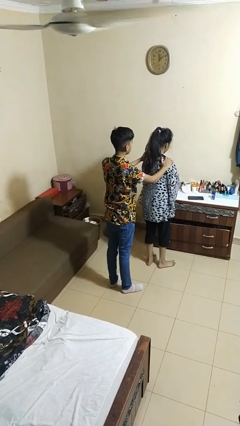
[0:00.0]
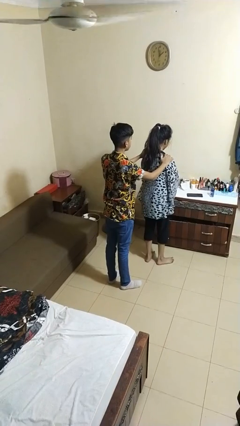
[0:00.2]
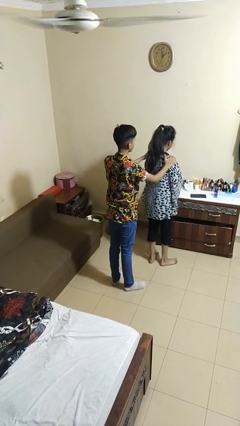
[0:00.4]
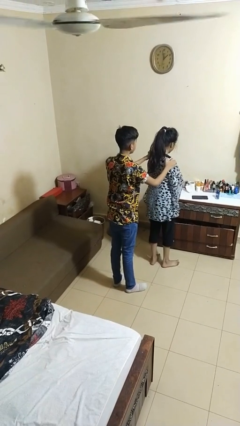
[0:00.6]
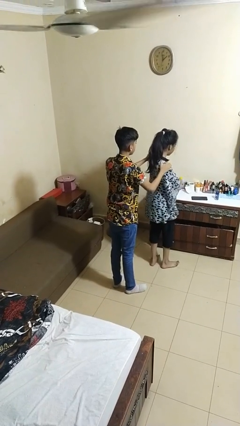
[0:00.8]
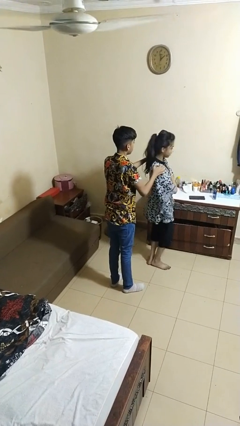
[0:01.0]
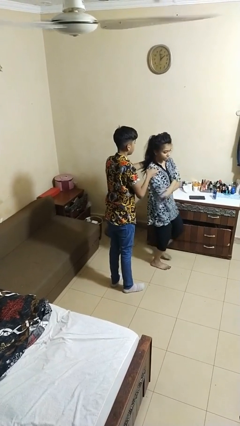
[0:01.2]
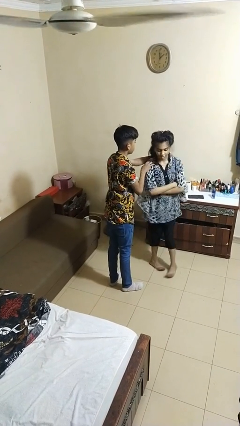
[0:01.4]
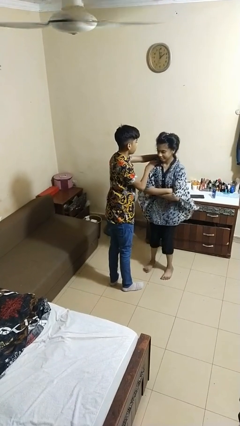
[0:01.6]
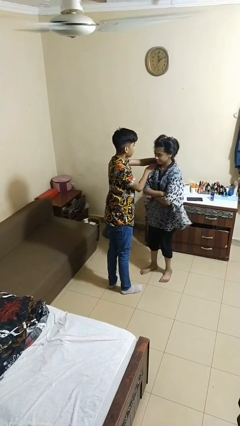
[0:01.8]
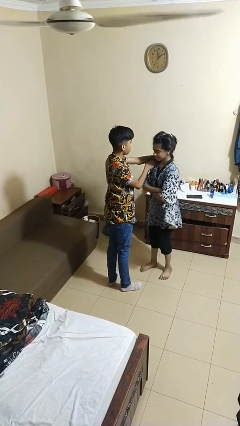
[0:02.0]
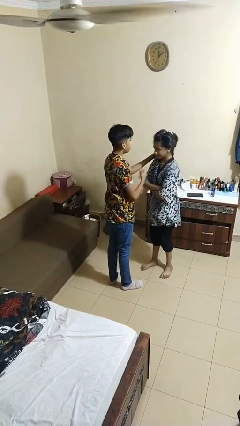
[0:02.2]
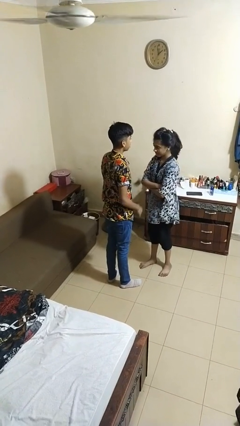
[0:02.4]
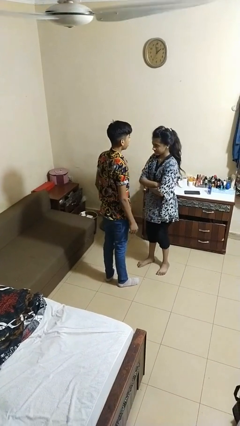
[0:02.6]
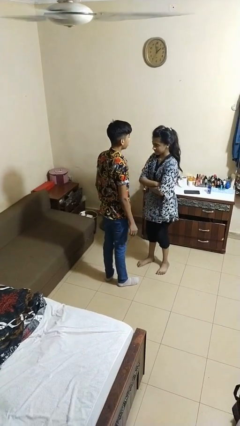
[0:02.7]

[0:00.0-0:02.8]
person spins person around

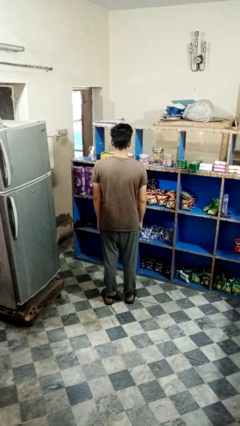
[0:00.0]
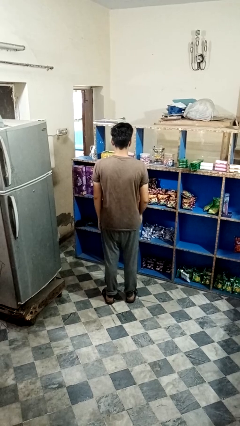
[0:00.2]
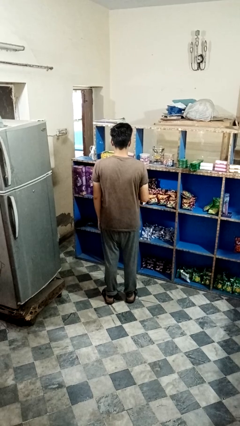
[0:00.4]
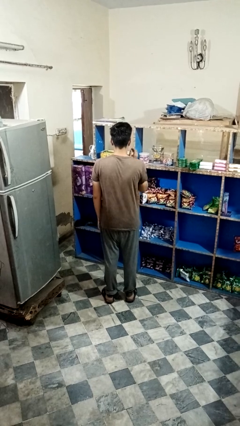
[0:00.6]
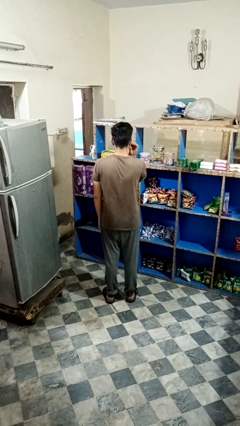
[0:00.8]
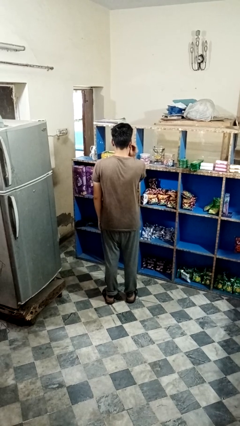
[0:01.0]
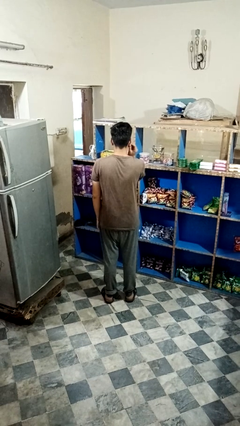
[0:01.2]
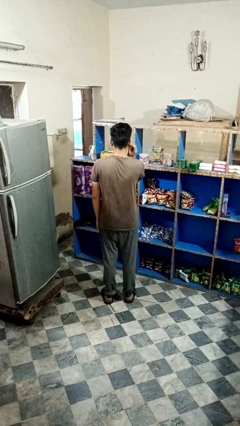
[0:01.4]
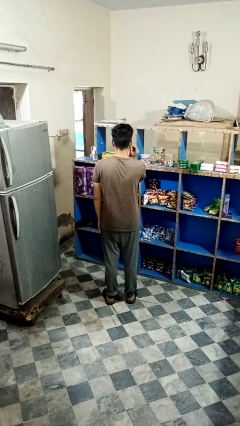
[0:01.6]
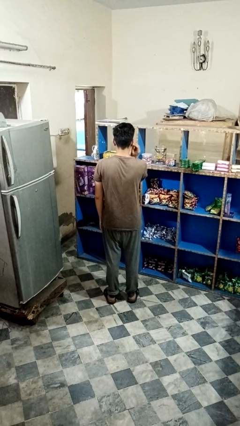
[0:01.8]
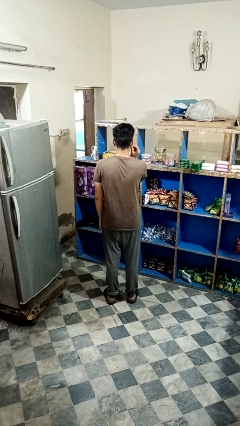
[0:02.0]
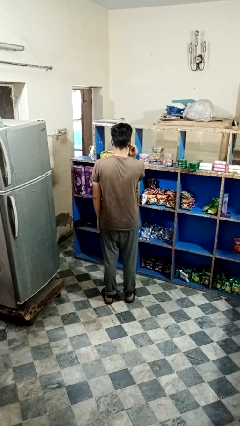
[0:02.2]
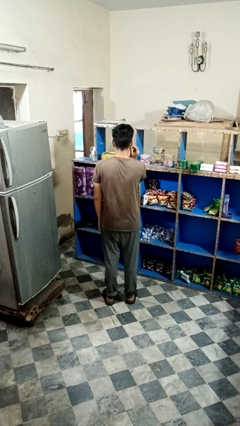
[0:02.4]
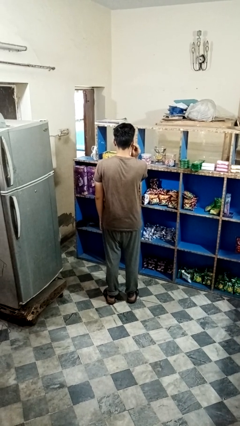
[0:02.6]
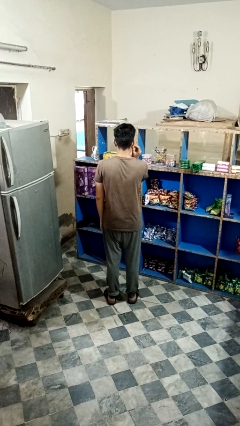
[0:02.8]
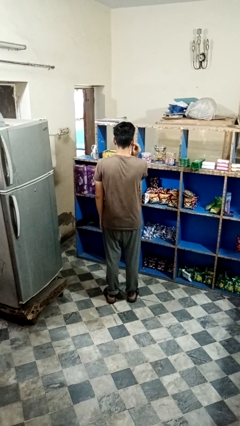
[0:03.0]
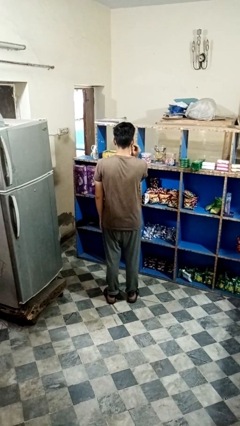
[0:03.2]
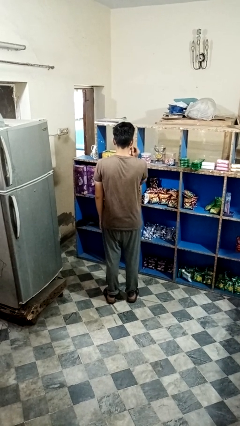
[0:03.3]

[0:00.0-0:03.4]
person touches earlobe

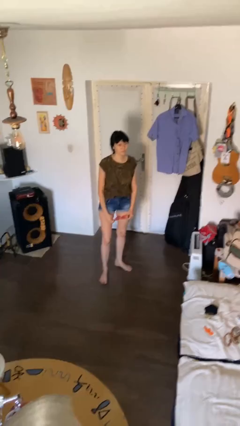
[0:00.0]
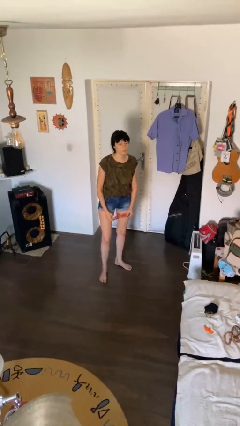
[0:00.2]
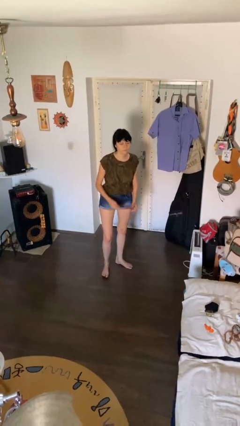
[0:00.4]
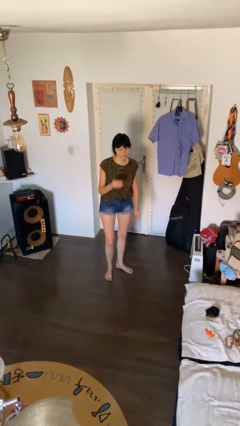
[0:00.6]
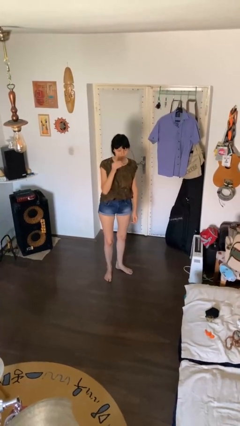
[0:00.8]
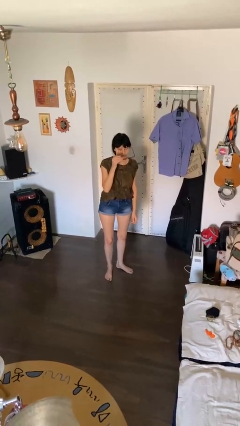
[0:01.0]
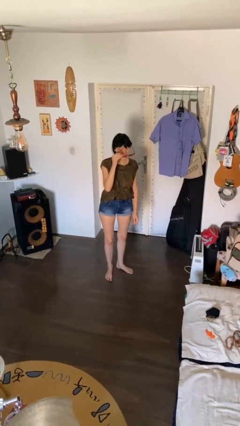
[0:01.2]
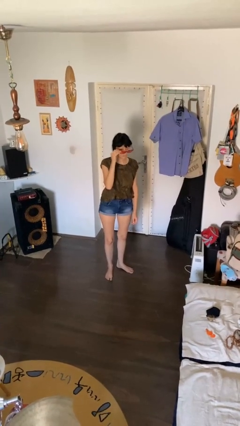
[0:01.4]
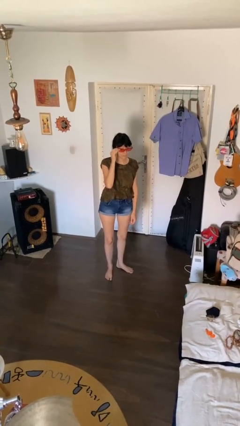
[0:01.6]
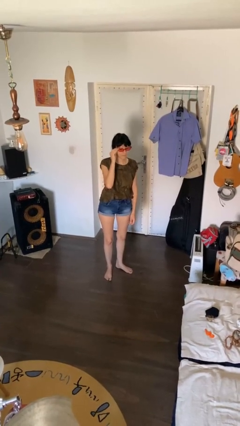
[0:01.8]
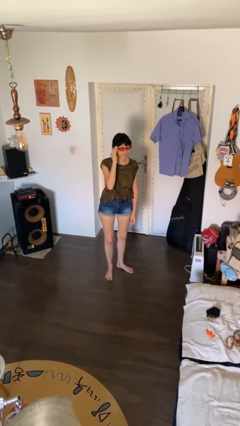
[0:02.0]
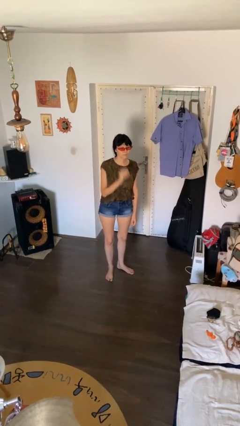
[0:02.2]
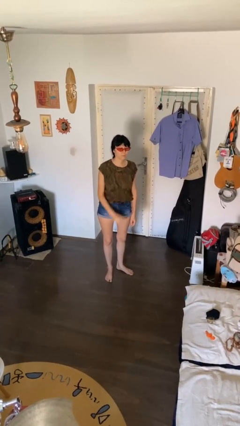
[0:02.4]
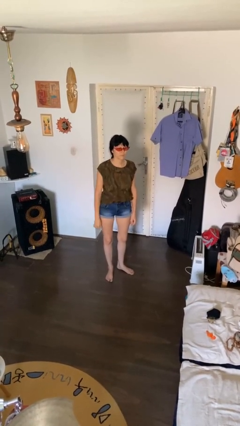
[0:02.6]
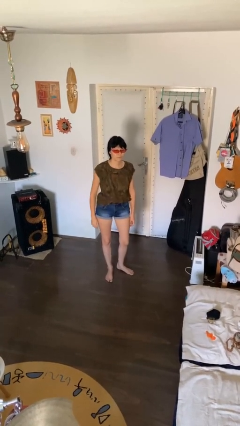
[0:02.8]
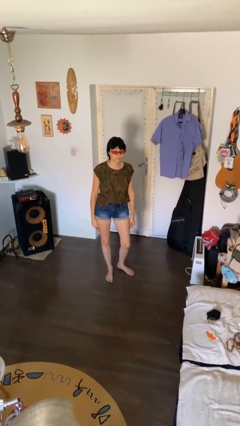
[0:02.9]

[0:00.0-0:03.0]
person puts on sunglasses

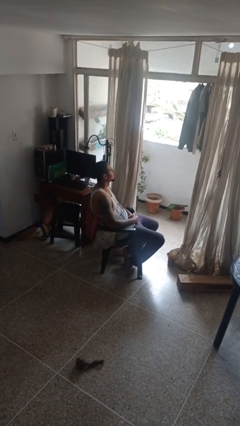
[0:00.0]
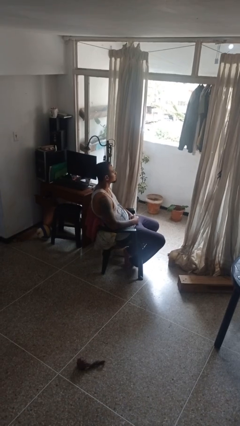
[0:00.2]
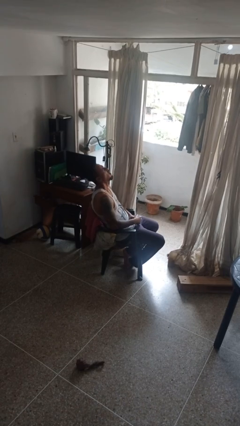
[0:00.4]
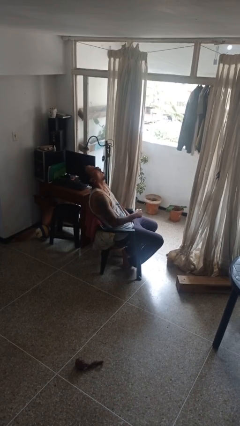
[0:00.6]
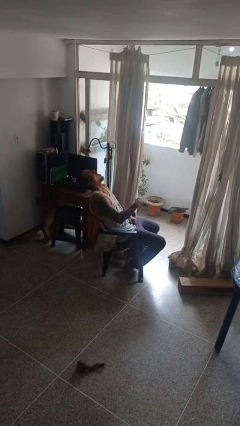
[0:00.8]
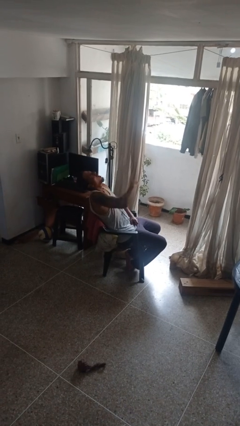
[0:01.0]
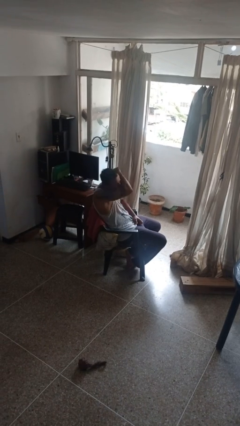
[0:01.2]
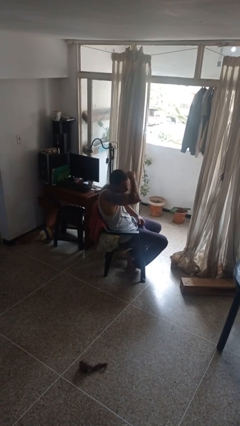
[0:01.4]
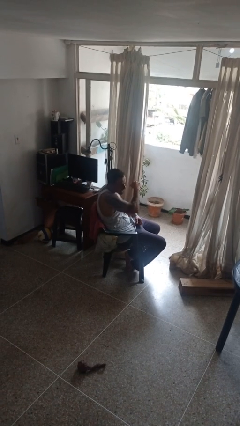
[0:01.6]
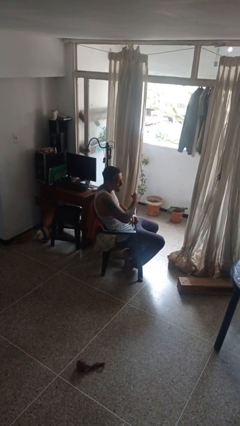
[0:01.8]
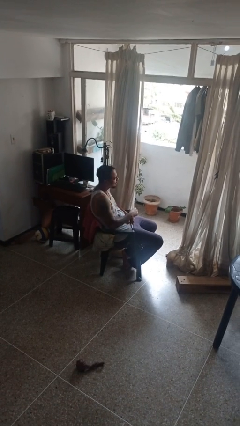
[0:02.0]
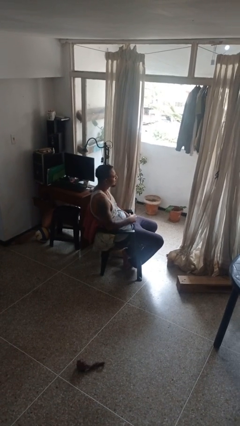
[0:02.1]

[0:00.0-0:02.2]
person sneezes into arm

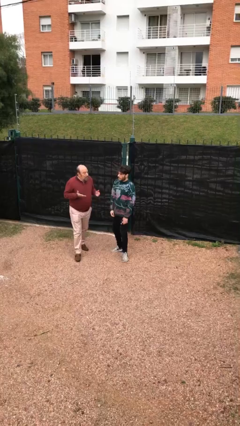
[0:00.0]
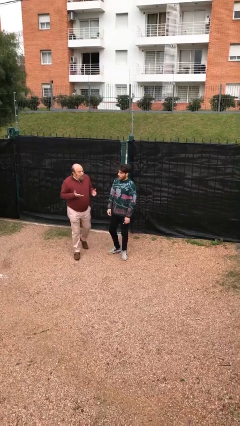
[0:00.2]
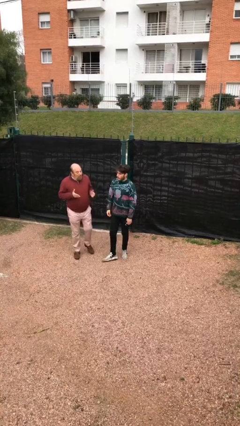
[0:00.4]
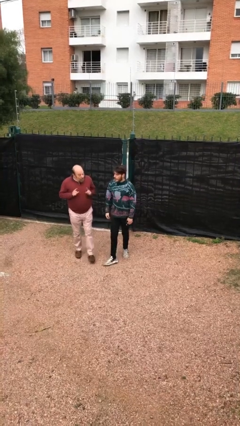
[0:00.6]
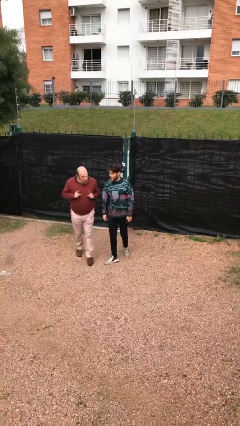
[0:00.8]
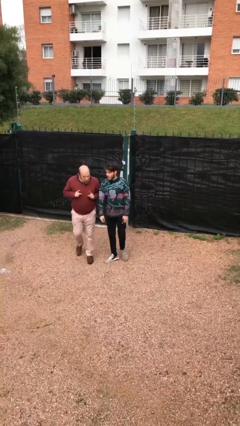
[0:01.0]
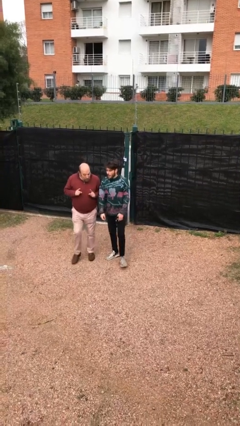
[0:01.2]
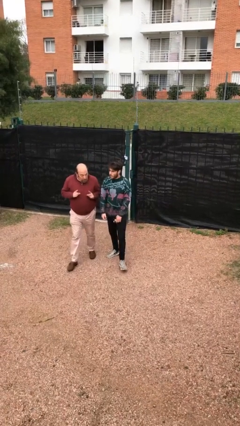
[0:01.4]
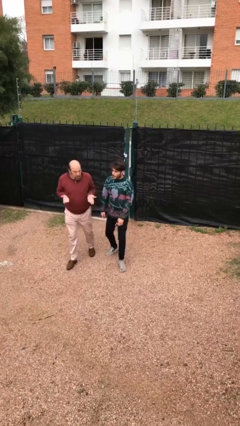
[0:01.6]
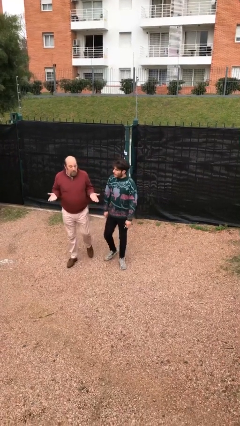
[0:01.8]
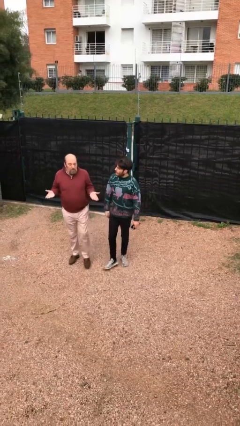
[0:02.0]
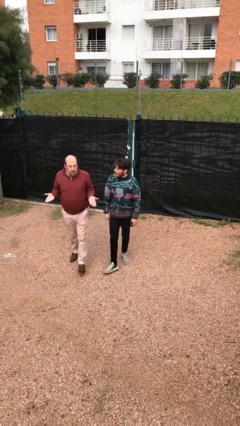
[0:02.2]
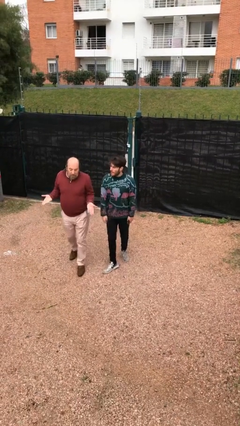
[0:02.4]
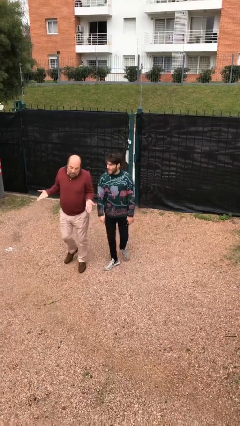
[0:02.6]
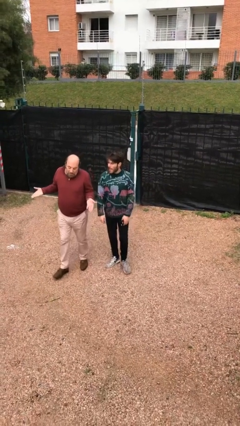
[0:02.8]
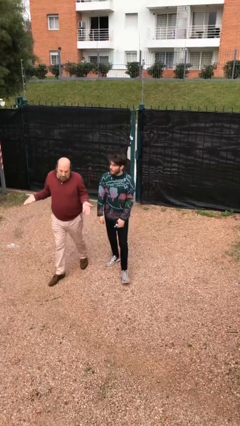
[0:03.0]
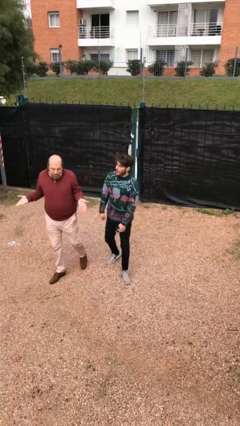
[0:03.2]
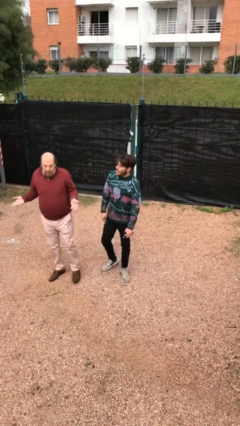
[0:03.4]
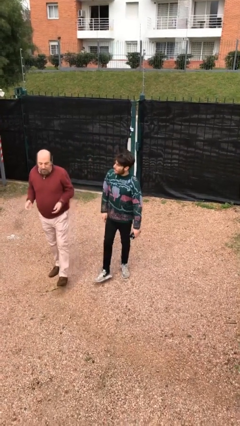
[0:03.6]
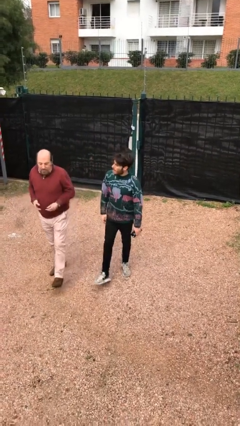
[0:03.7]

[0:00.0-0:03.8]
person talks to person

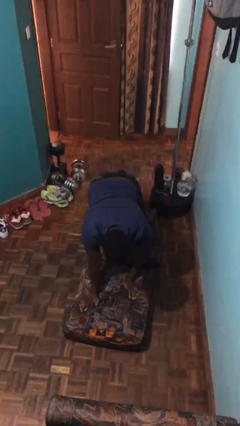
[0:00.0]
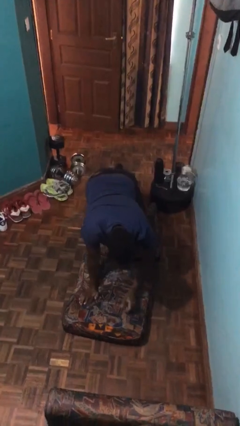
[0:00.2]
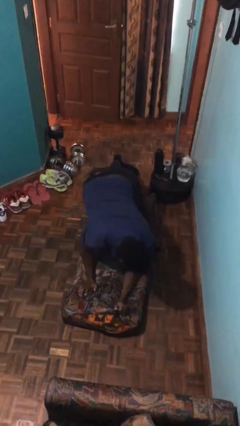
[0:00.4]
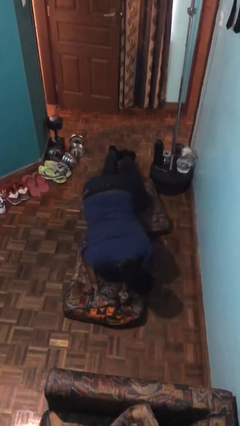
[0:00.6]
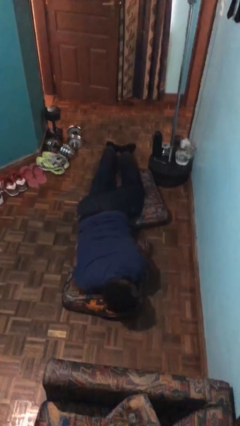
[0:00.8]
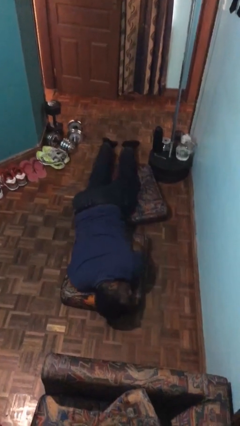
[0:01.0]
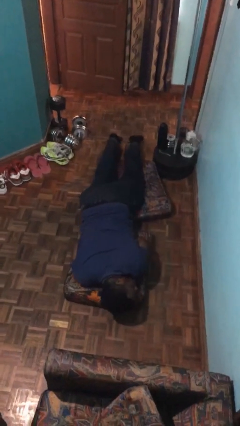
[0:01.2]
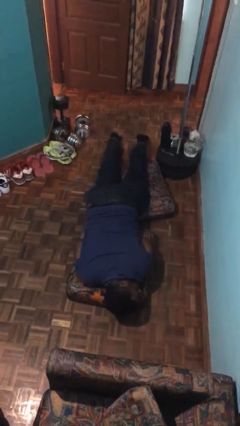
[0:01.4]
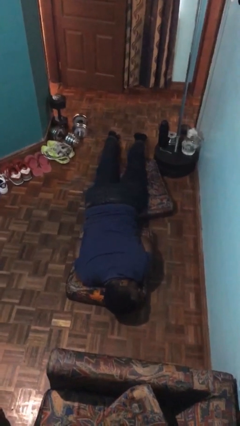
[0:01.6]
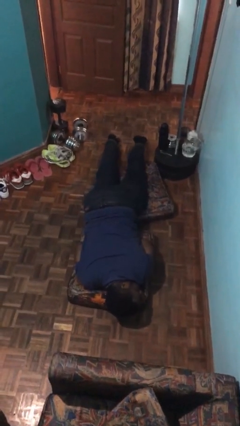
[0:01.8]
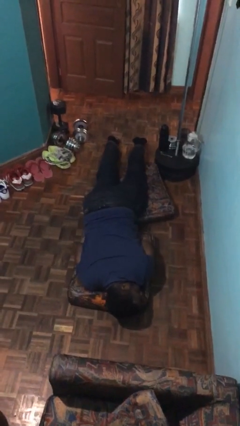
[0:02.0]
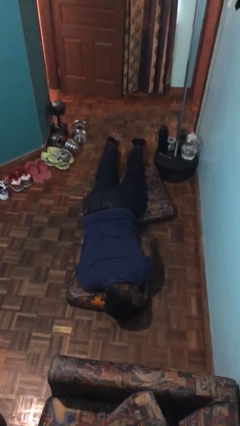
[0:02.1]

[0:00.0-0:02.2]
person lies down on floor
